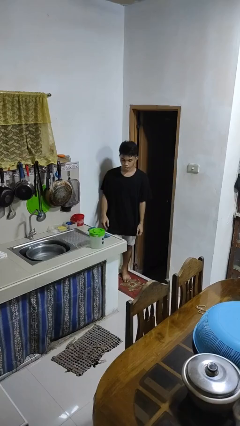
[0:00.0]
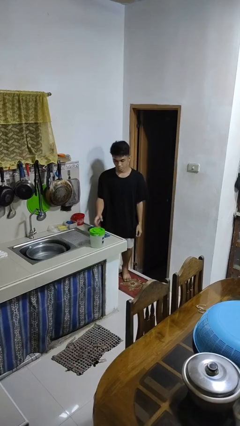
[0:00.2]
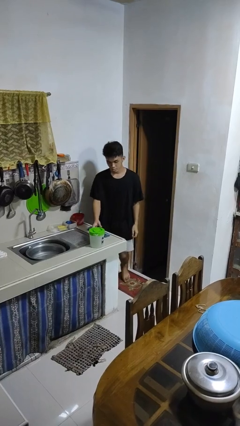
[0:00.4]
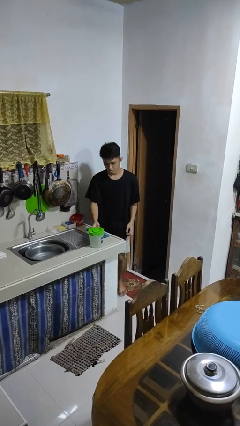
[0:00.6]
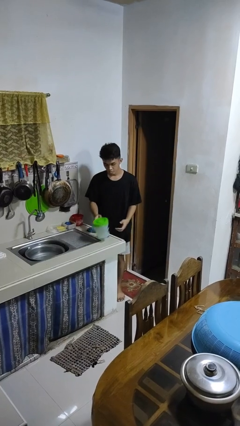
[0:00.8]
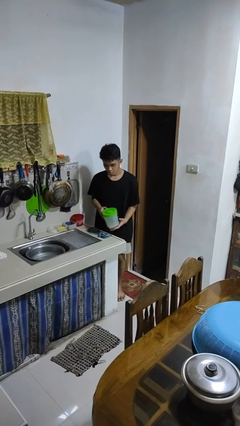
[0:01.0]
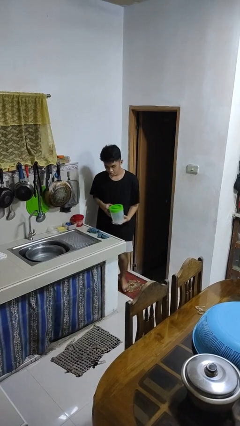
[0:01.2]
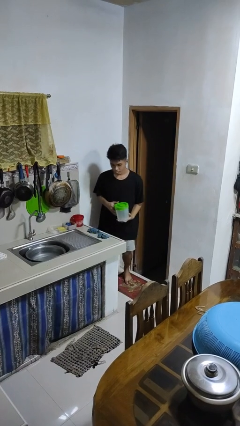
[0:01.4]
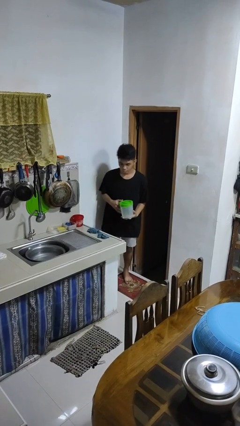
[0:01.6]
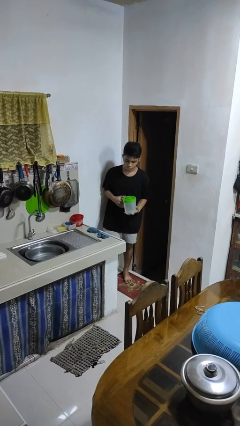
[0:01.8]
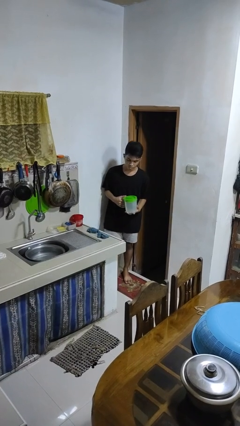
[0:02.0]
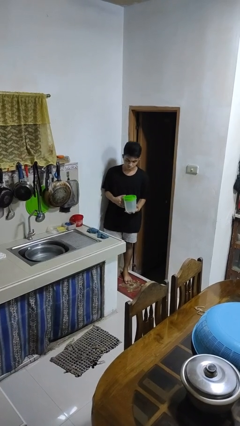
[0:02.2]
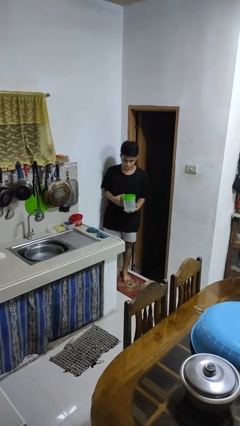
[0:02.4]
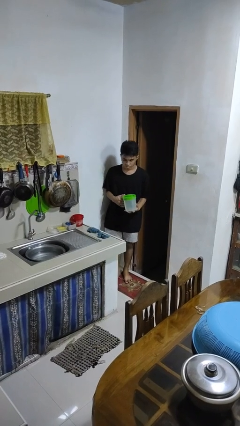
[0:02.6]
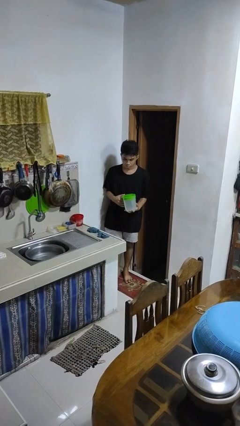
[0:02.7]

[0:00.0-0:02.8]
person picks up object from countertop

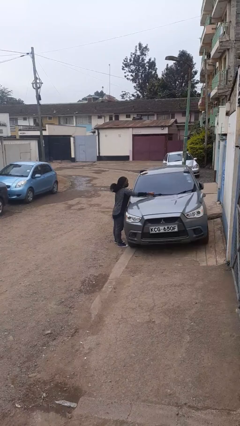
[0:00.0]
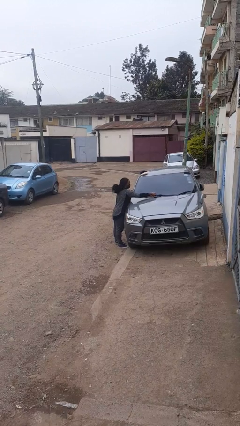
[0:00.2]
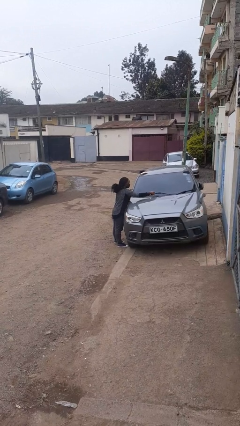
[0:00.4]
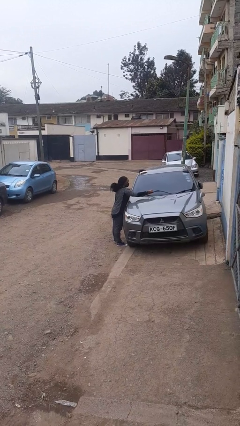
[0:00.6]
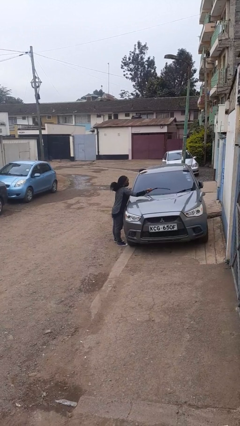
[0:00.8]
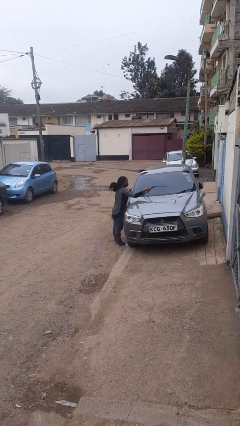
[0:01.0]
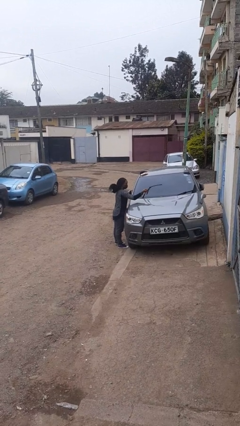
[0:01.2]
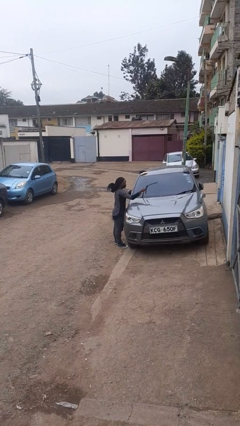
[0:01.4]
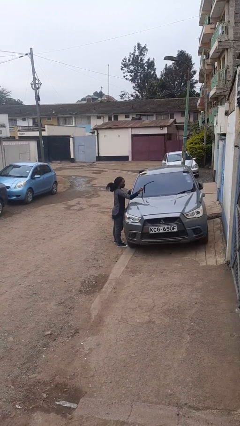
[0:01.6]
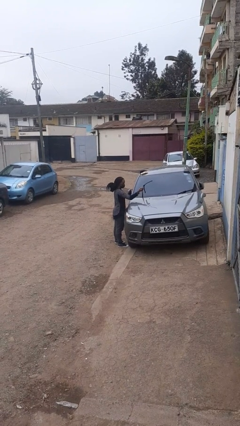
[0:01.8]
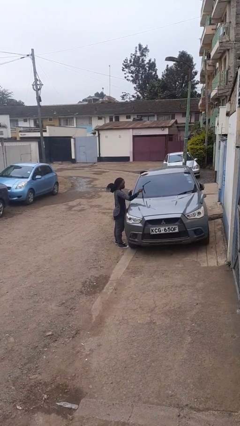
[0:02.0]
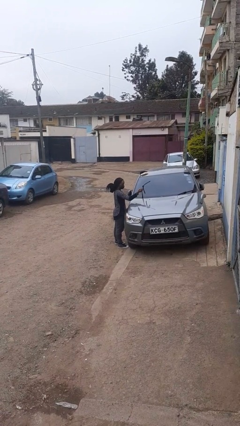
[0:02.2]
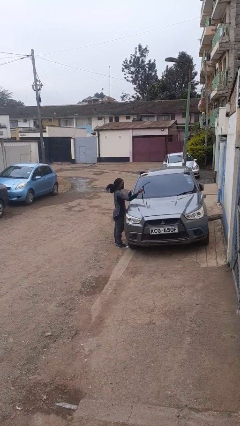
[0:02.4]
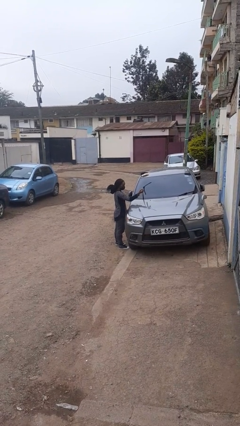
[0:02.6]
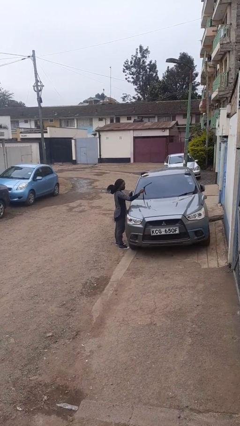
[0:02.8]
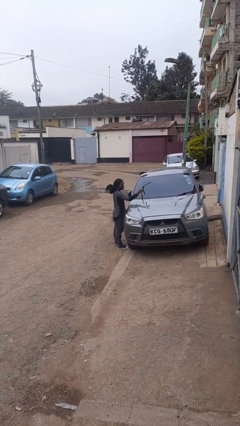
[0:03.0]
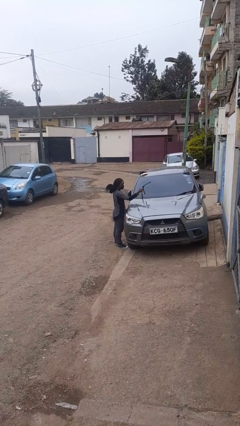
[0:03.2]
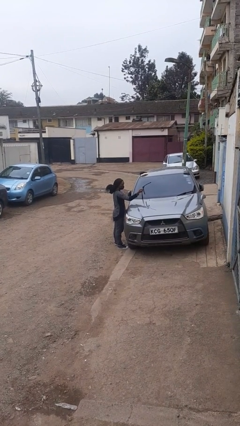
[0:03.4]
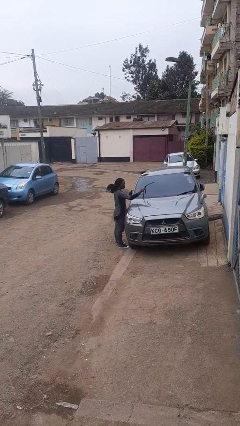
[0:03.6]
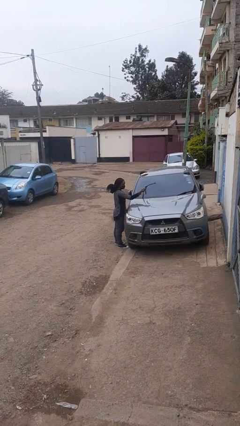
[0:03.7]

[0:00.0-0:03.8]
person flips up car wipers

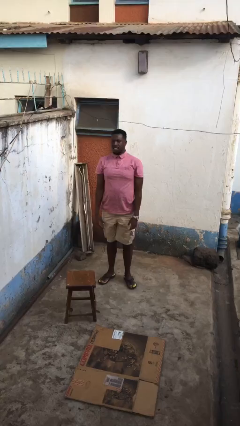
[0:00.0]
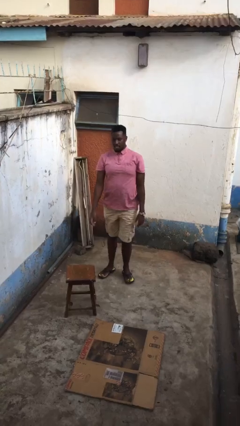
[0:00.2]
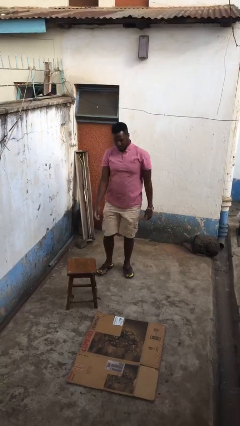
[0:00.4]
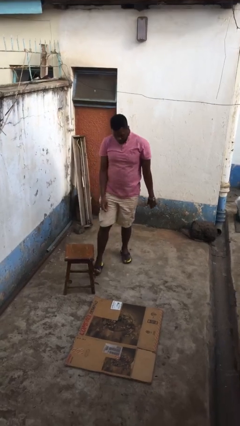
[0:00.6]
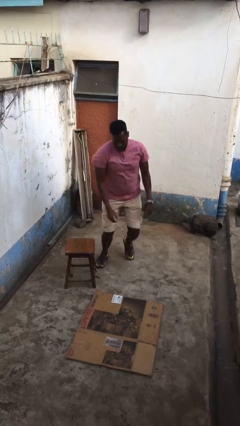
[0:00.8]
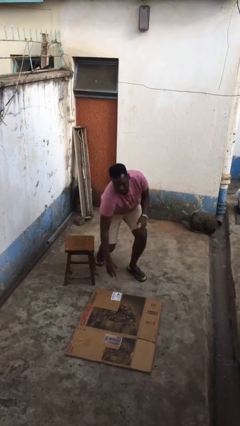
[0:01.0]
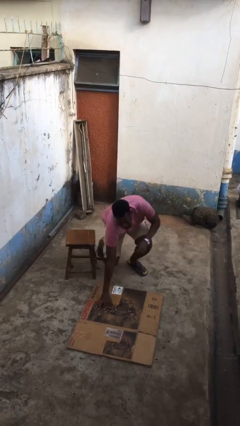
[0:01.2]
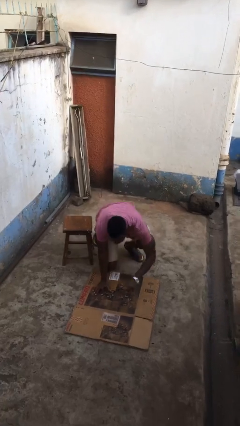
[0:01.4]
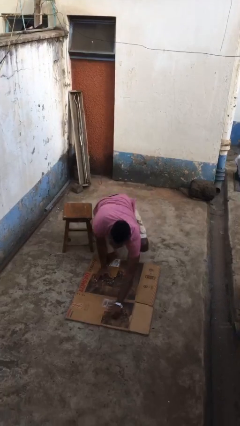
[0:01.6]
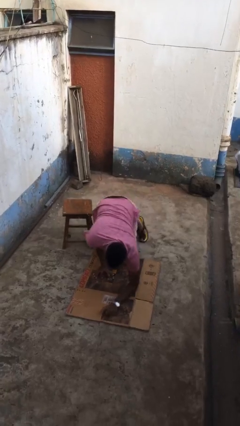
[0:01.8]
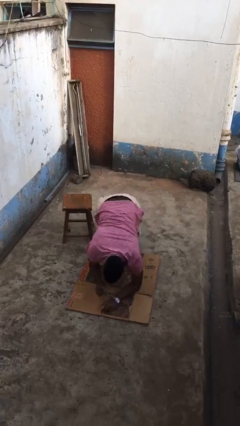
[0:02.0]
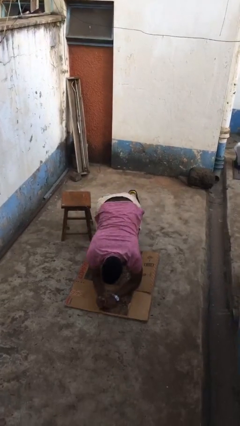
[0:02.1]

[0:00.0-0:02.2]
person trips on object on floor

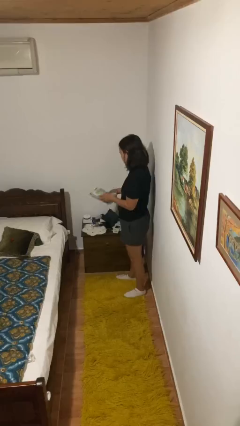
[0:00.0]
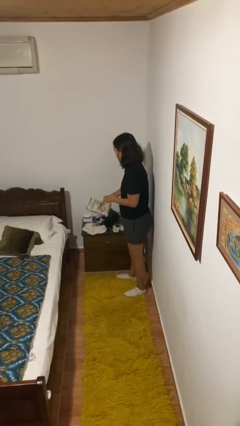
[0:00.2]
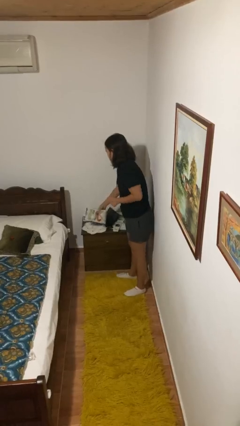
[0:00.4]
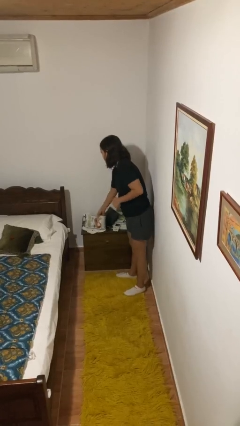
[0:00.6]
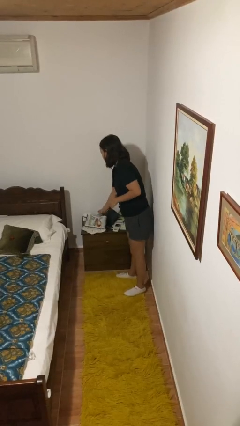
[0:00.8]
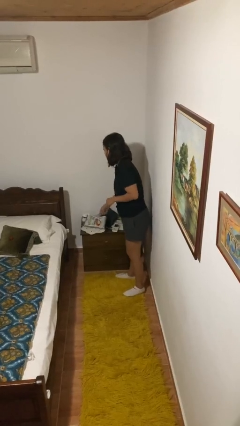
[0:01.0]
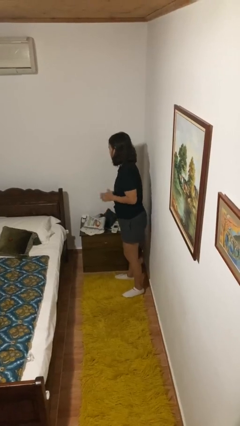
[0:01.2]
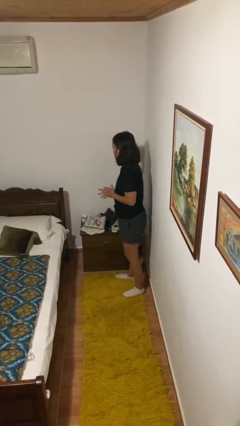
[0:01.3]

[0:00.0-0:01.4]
person puts down object on countertop

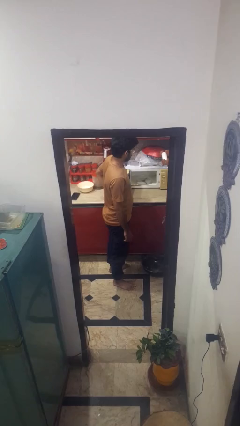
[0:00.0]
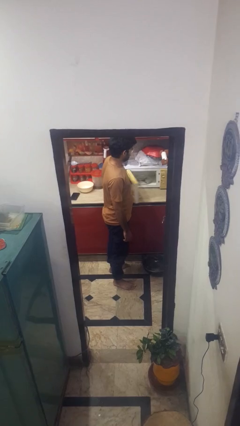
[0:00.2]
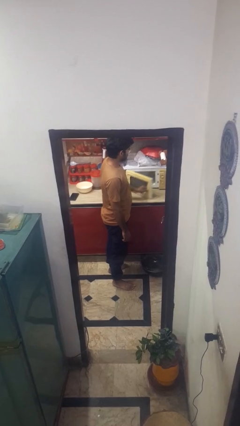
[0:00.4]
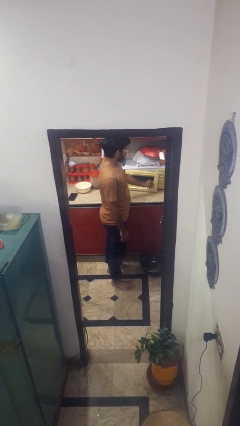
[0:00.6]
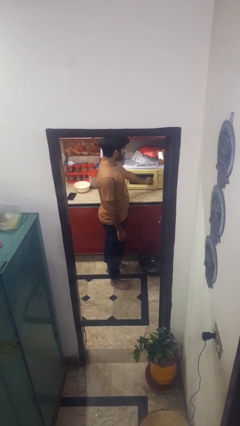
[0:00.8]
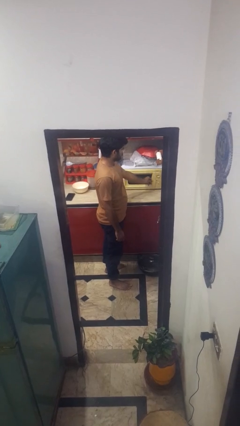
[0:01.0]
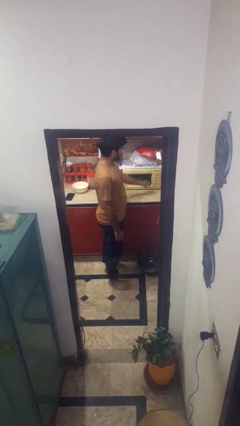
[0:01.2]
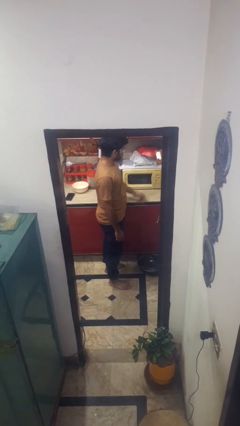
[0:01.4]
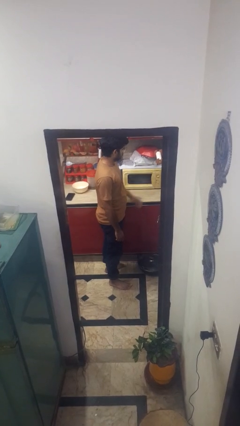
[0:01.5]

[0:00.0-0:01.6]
person closes microwave

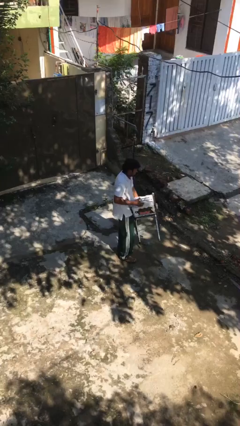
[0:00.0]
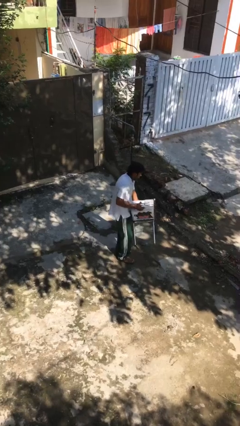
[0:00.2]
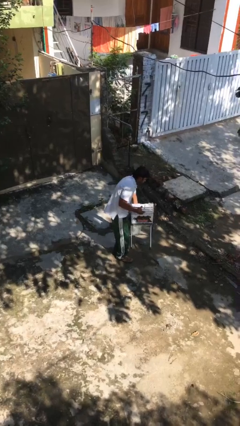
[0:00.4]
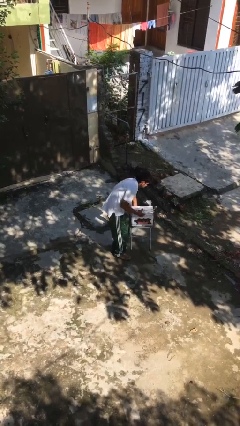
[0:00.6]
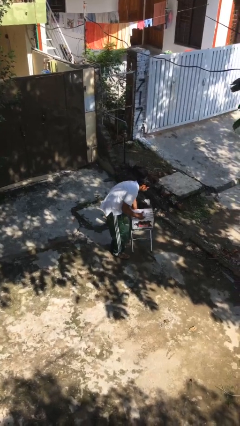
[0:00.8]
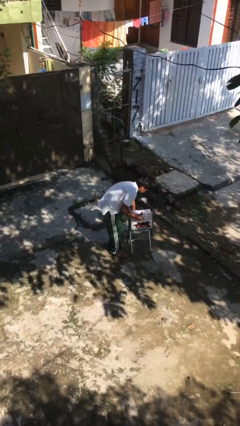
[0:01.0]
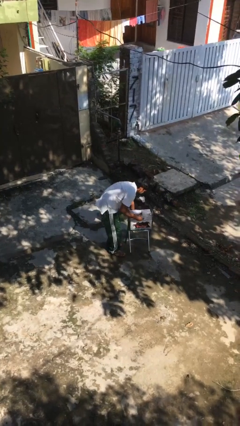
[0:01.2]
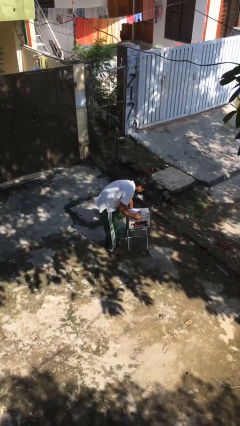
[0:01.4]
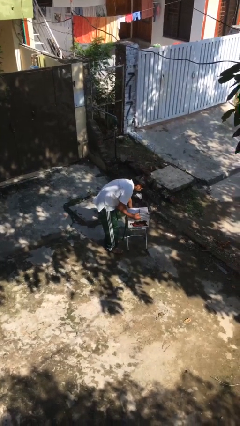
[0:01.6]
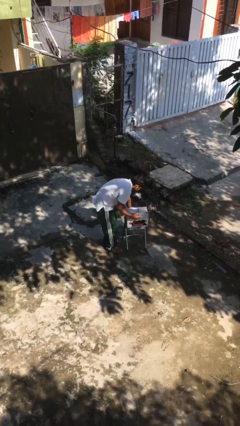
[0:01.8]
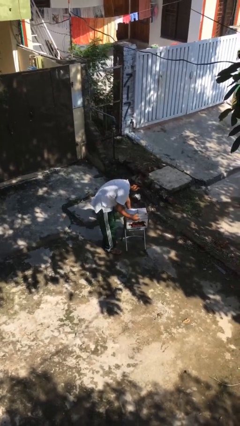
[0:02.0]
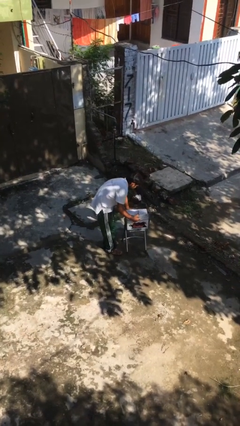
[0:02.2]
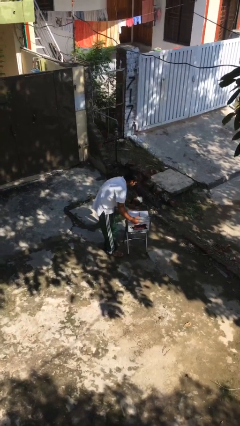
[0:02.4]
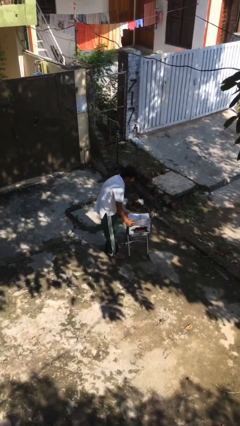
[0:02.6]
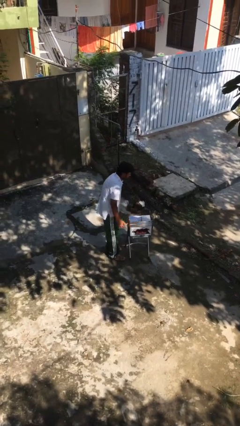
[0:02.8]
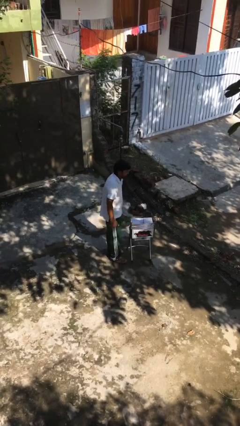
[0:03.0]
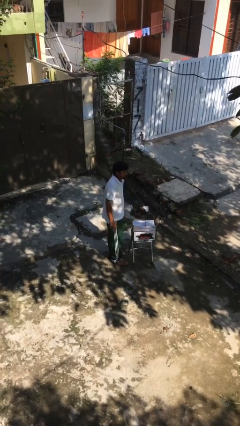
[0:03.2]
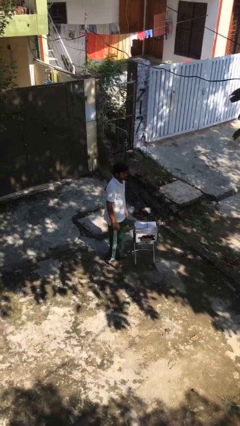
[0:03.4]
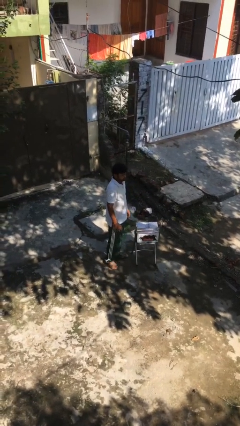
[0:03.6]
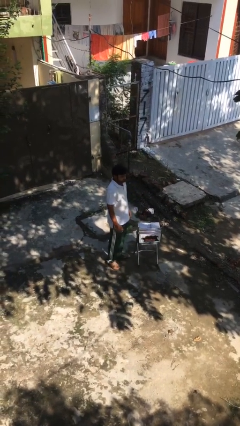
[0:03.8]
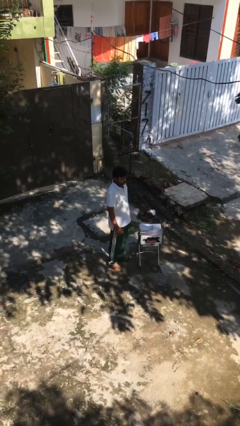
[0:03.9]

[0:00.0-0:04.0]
person puts down object on floor

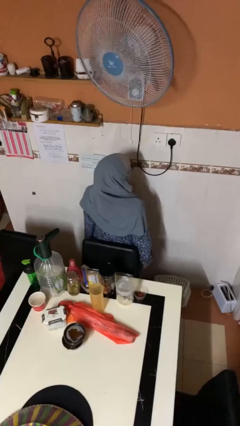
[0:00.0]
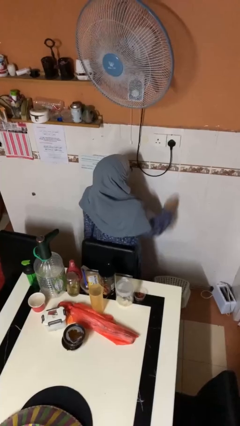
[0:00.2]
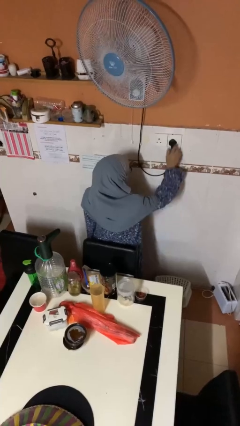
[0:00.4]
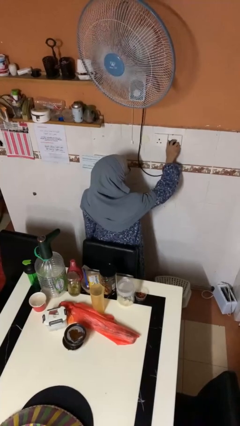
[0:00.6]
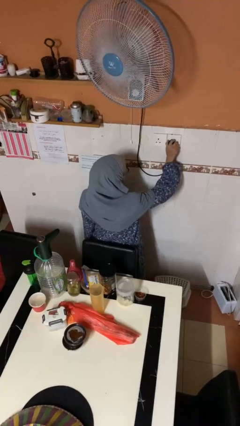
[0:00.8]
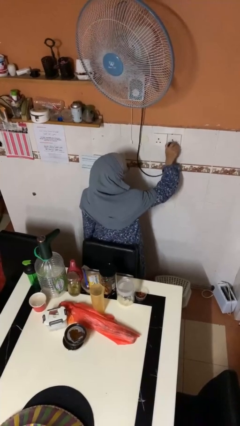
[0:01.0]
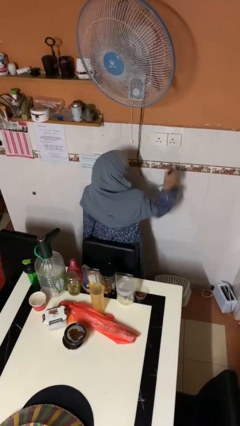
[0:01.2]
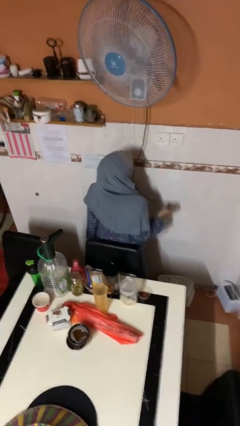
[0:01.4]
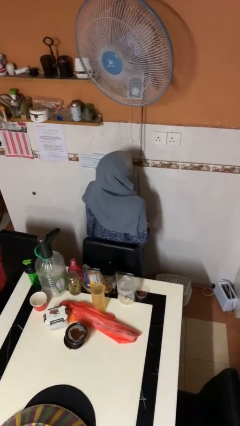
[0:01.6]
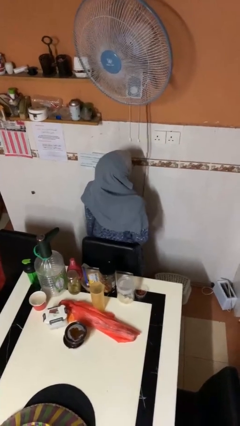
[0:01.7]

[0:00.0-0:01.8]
person unplugs from electrical socket
